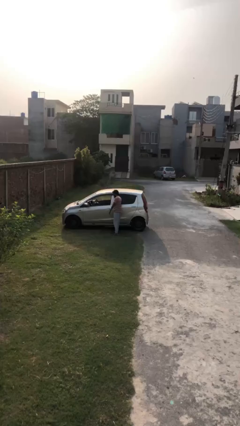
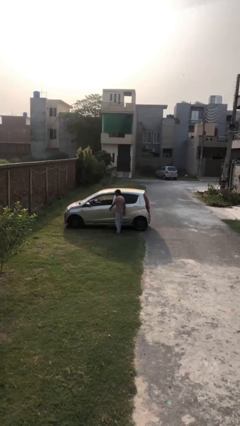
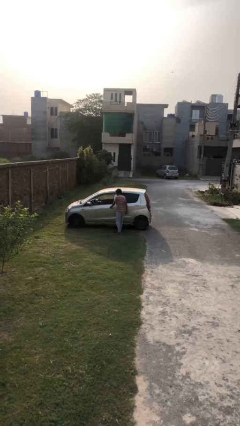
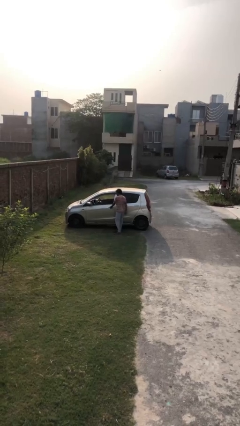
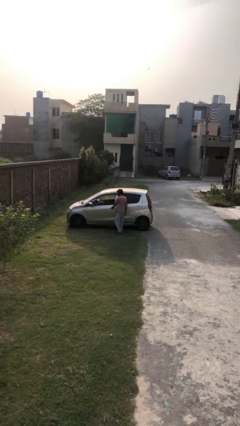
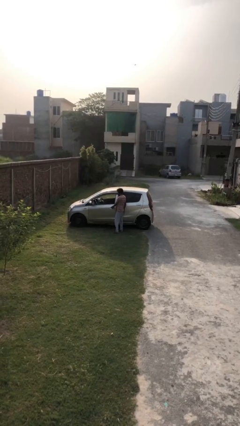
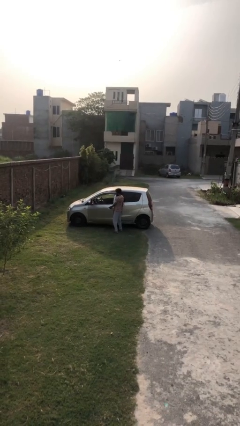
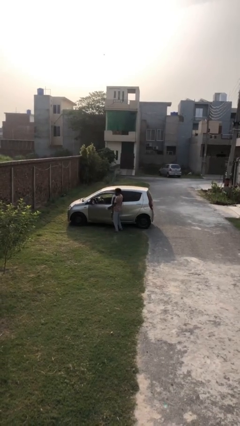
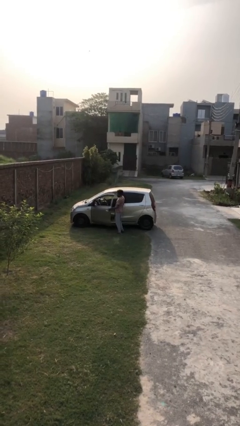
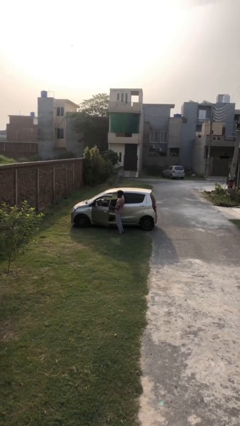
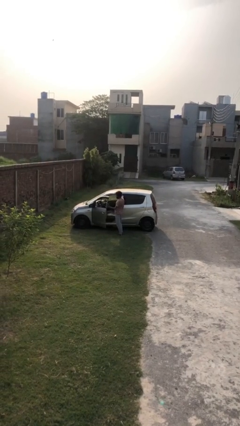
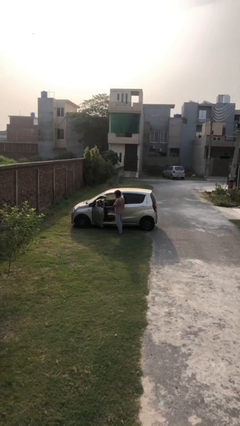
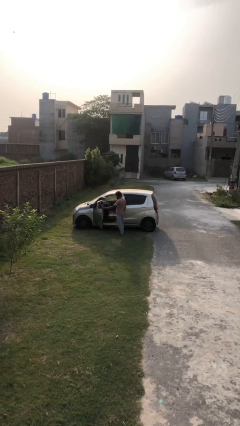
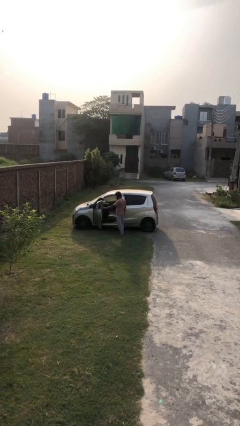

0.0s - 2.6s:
person opens car door

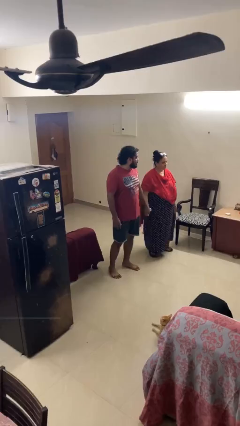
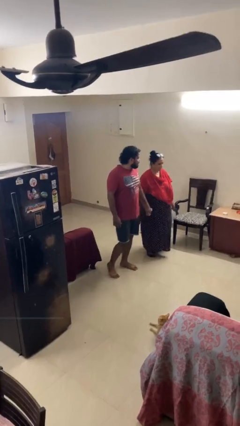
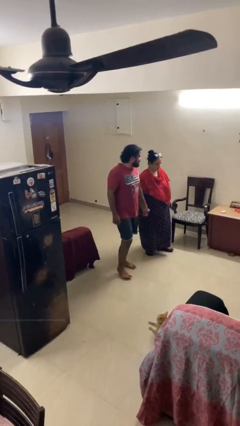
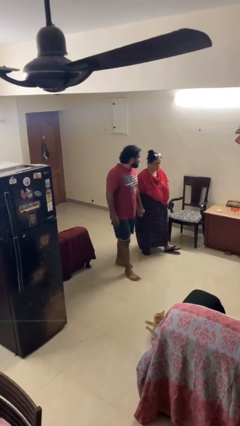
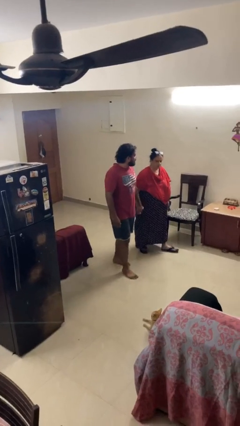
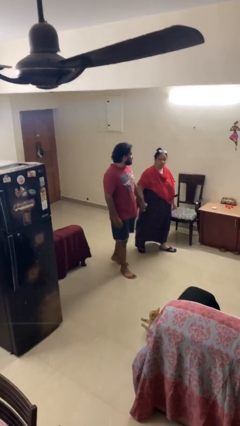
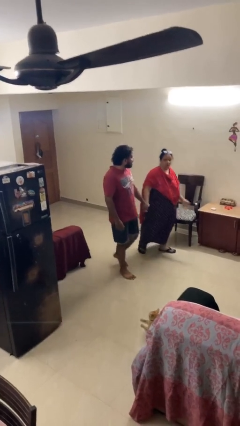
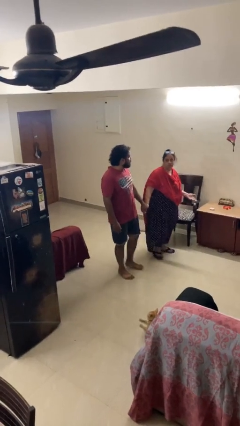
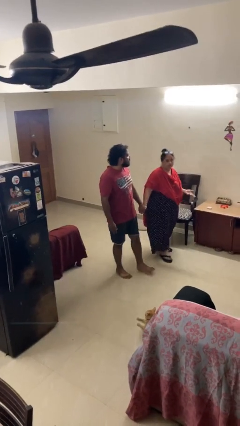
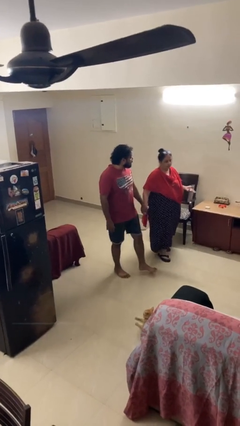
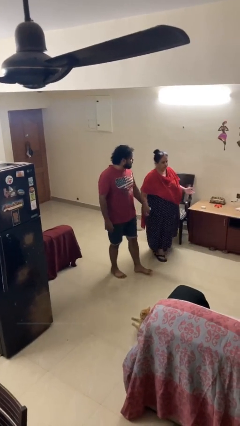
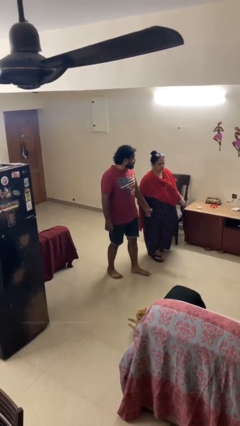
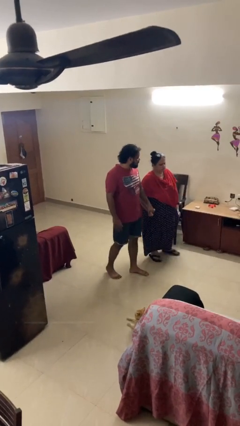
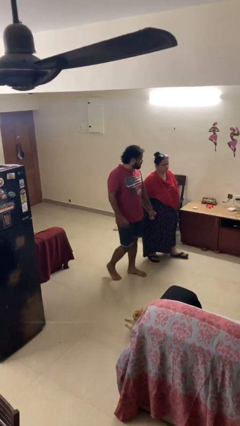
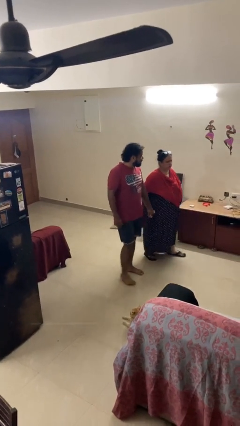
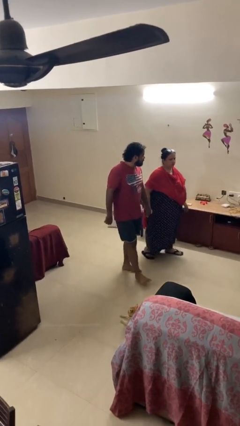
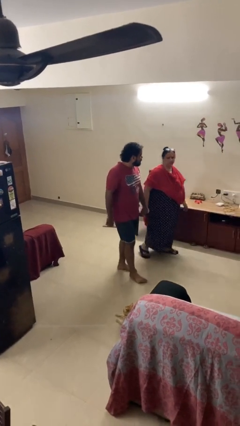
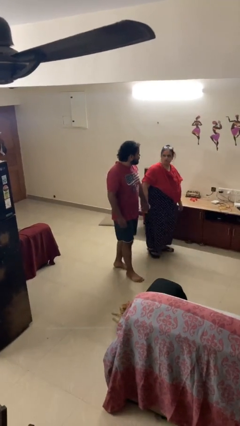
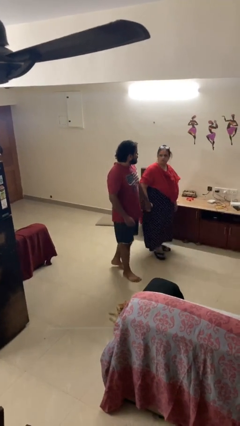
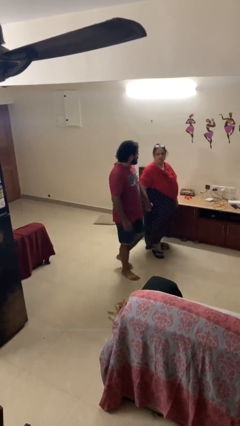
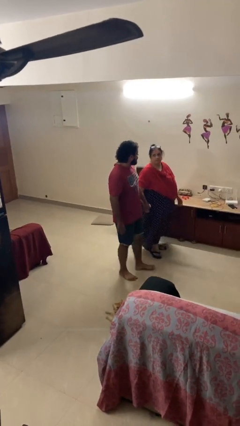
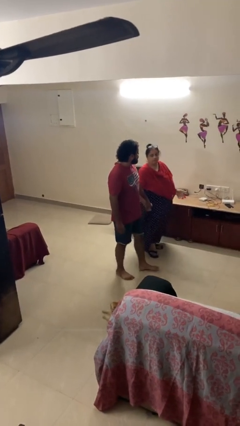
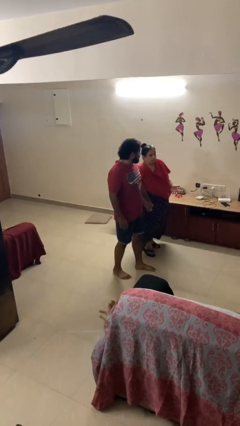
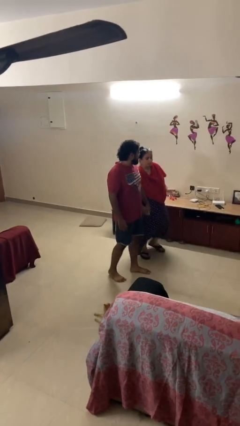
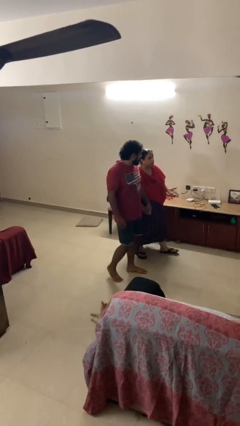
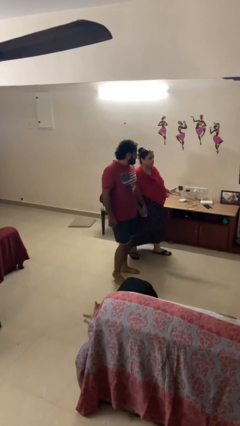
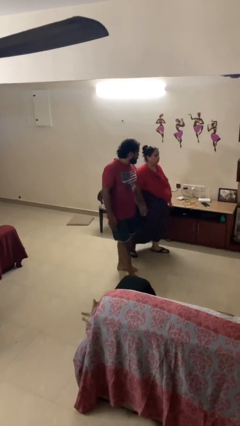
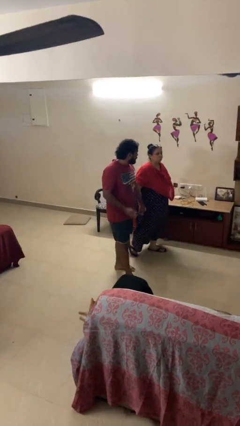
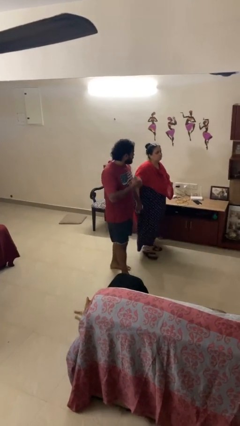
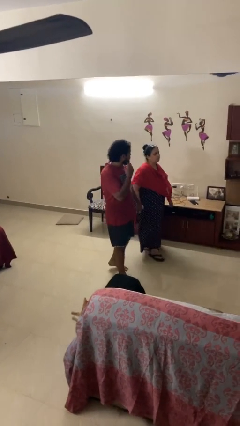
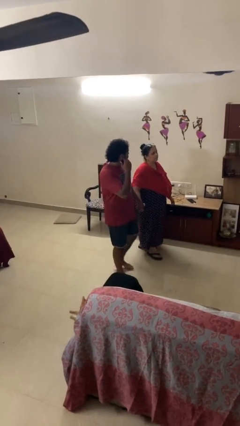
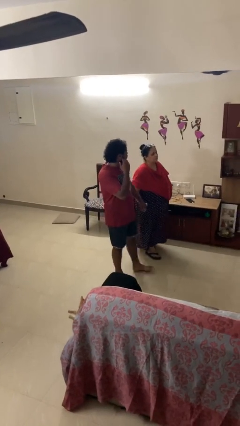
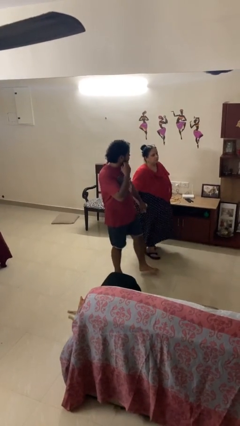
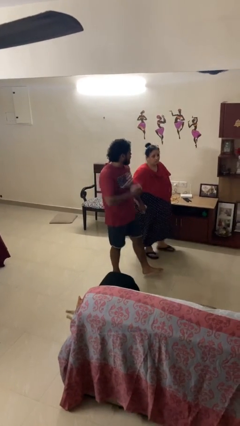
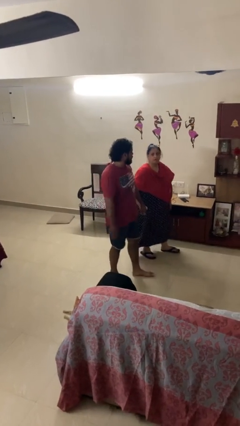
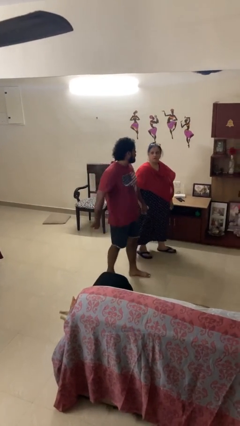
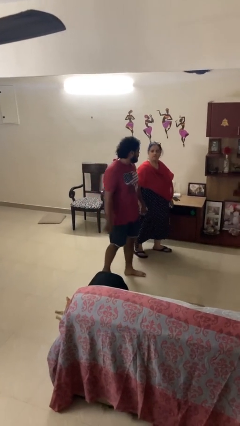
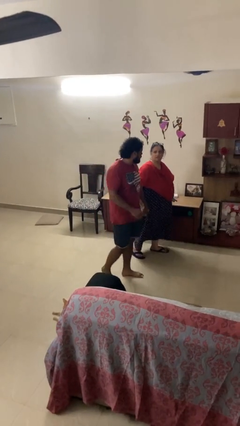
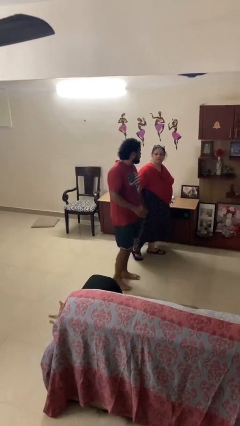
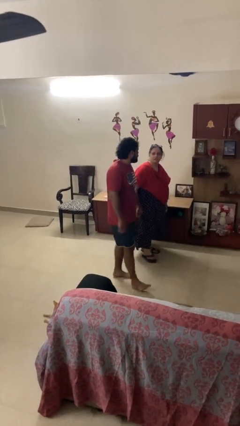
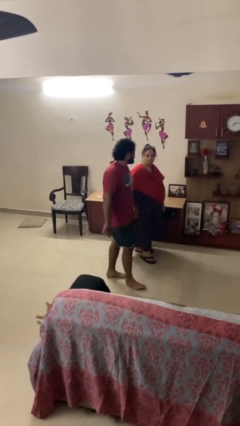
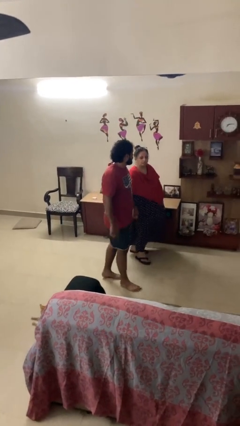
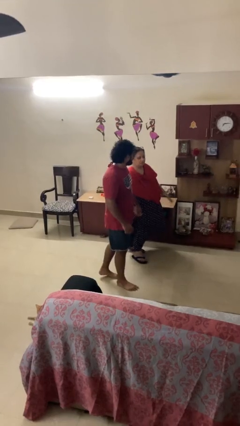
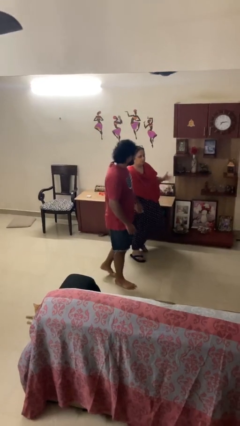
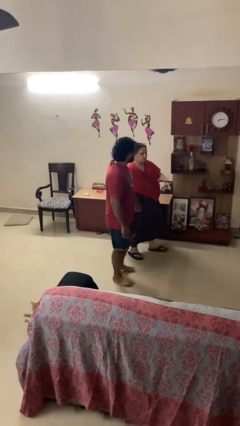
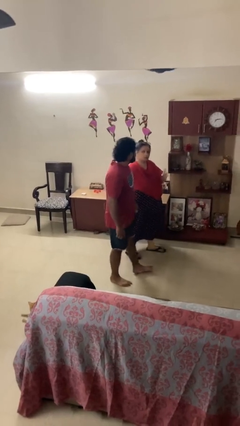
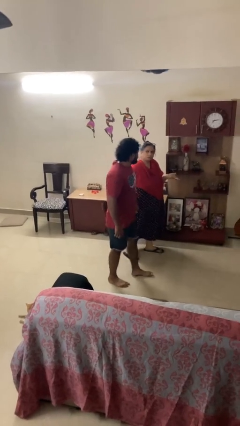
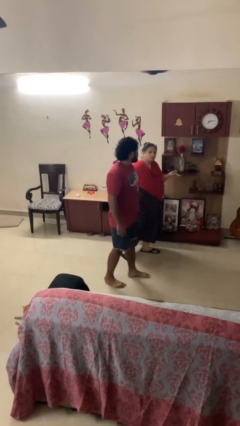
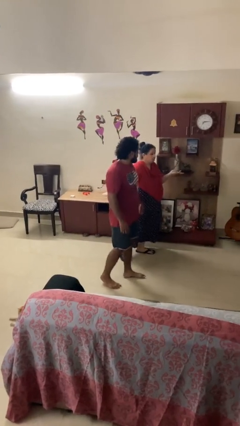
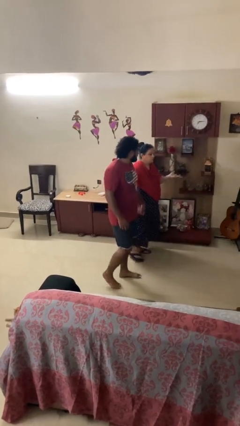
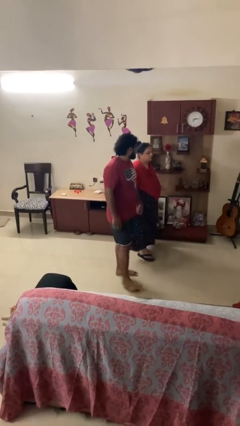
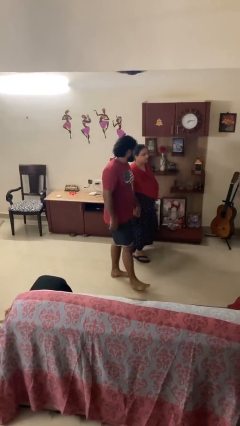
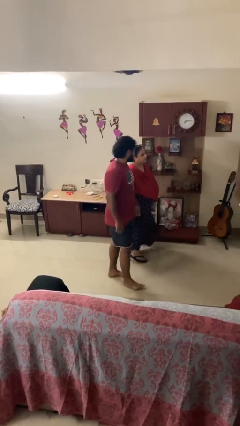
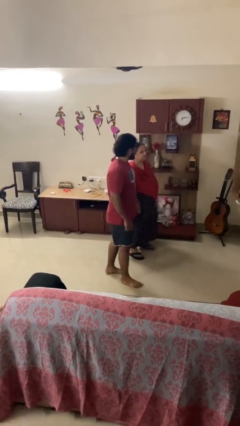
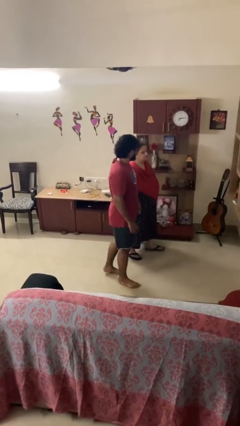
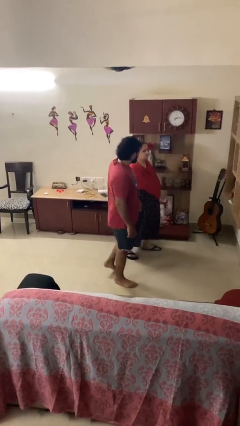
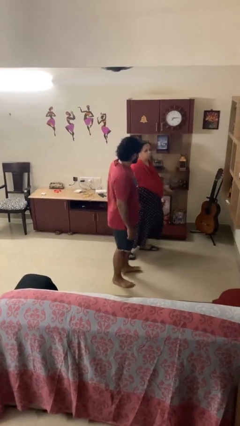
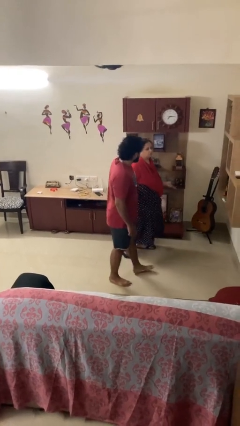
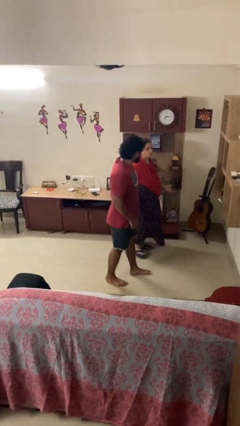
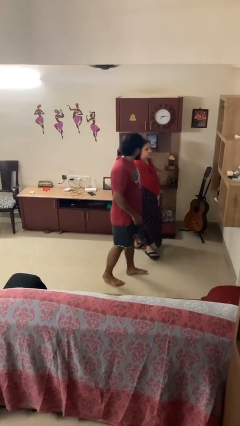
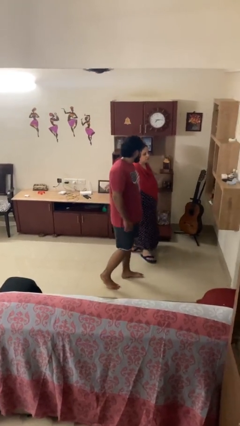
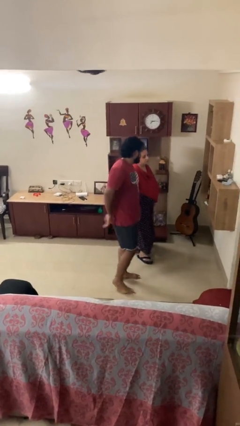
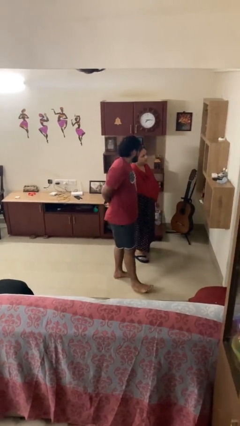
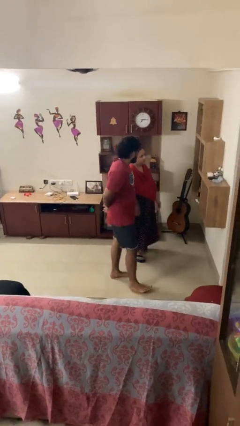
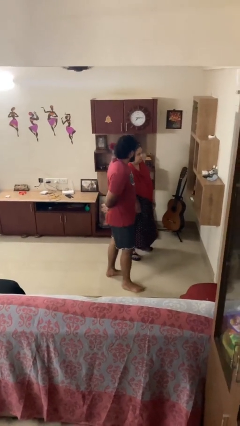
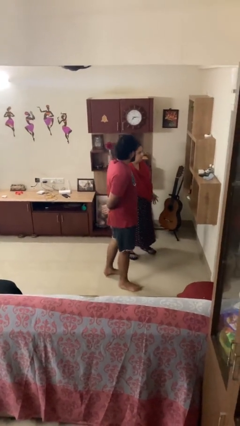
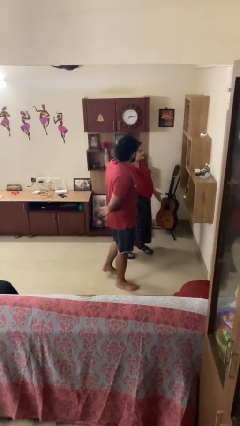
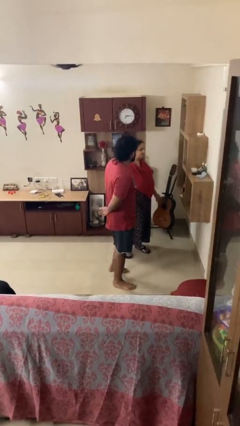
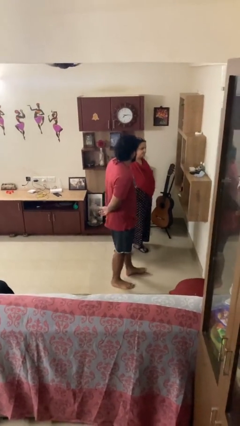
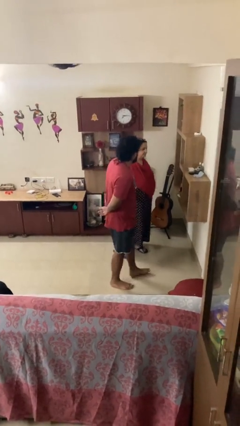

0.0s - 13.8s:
person talks to person

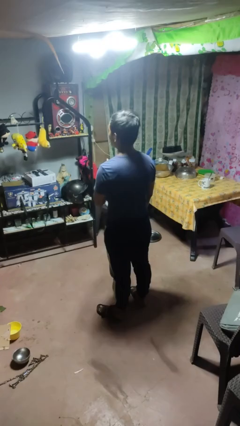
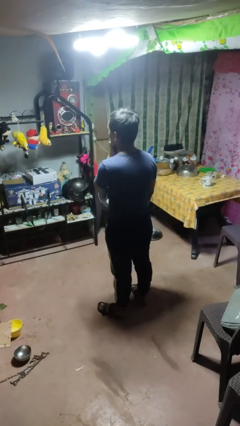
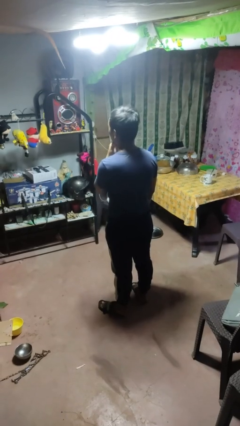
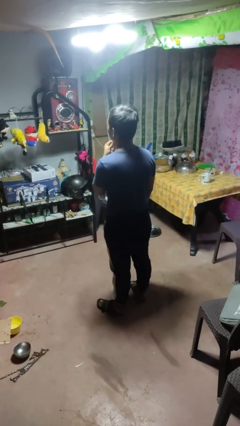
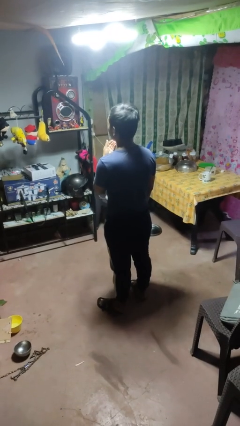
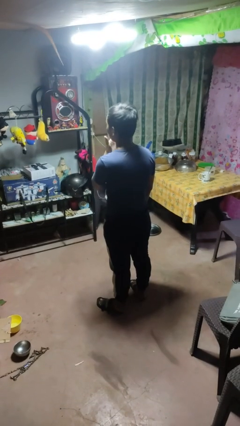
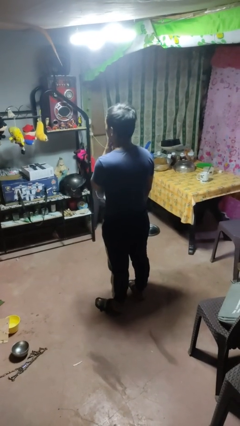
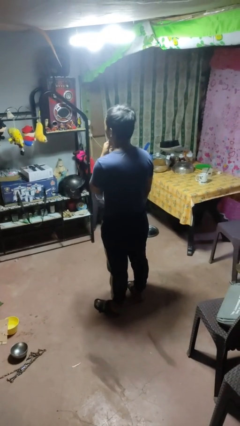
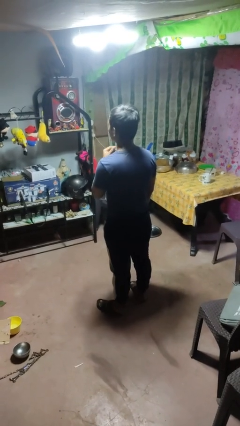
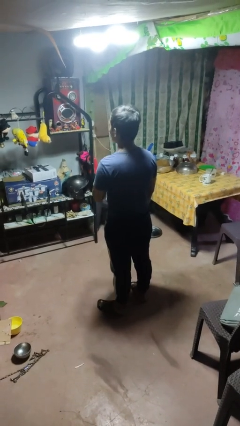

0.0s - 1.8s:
person strokes chin
